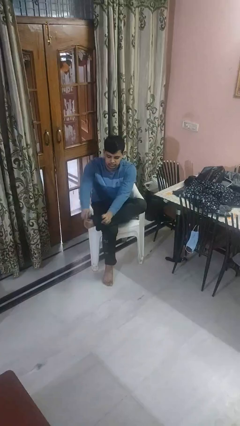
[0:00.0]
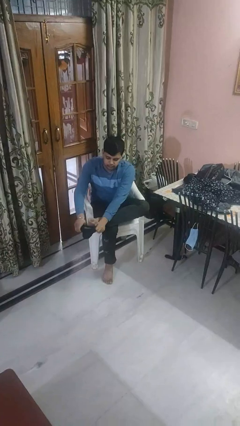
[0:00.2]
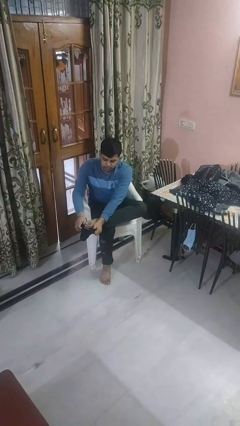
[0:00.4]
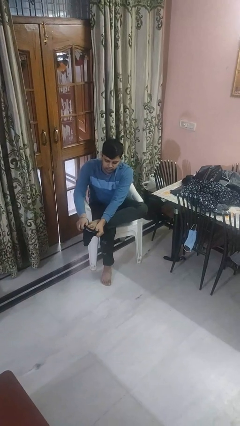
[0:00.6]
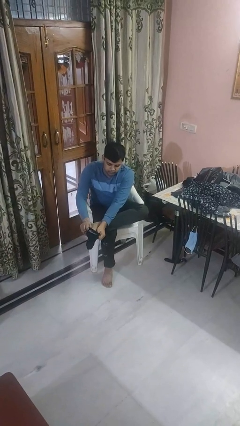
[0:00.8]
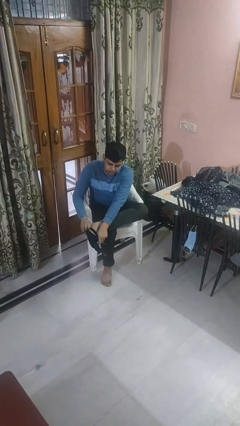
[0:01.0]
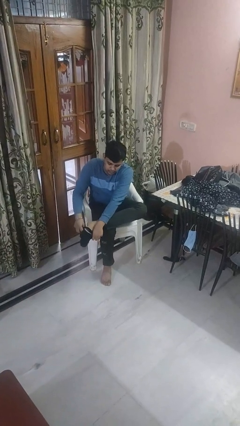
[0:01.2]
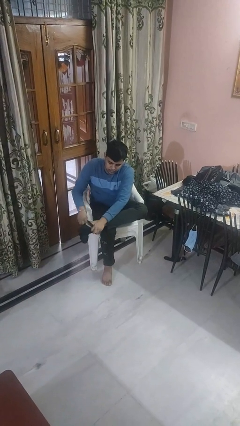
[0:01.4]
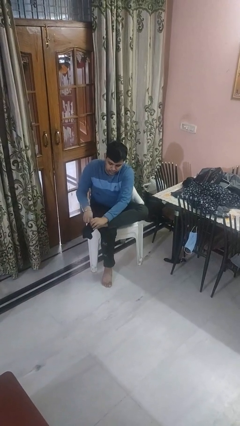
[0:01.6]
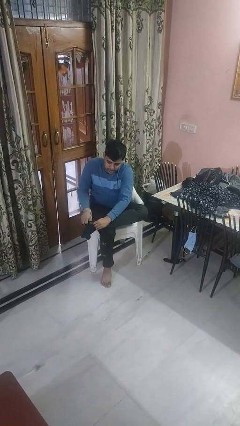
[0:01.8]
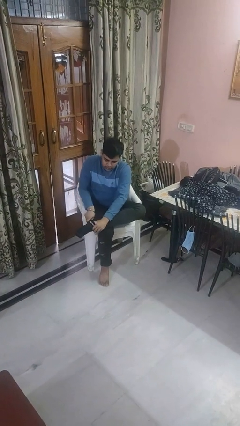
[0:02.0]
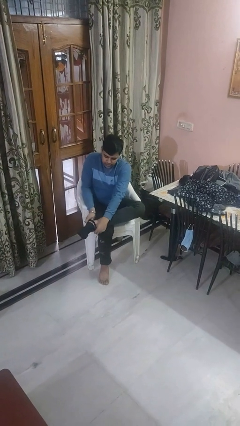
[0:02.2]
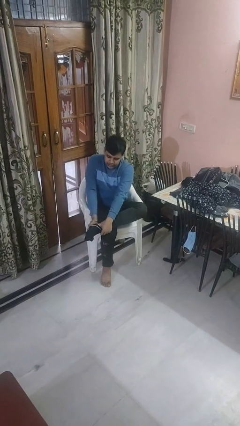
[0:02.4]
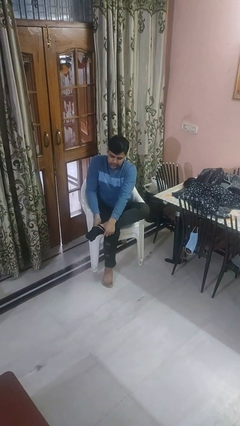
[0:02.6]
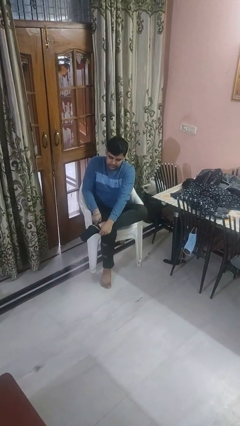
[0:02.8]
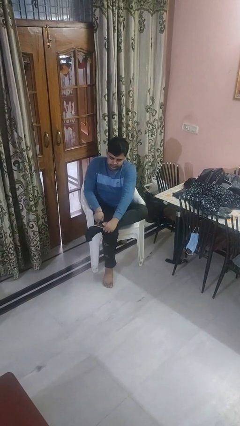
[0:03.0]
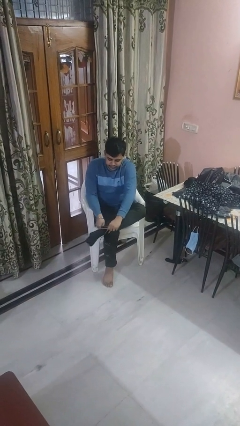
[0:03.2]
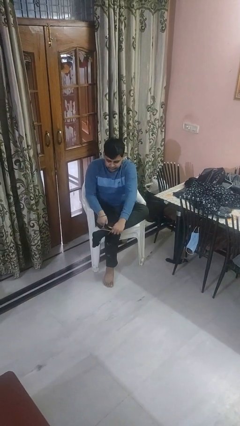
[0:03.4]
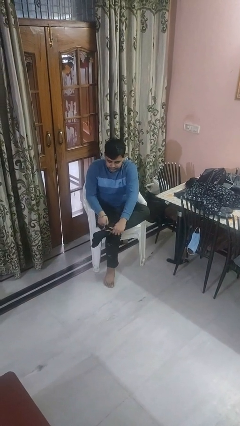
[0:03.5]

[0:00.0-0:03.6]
person puts on socks

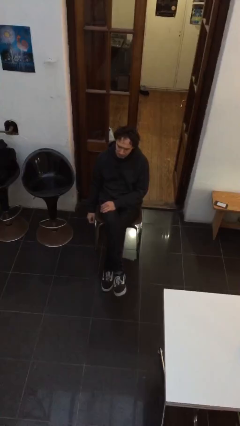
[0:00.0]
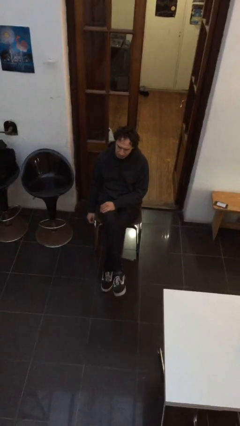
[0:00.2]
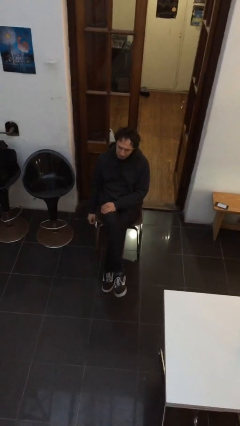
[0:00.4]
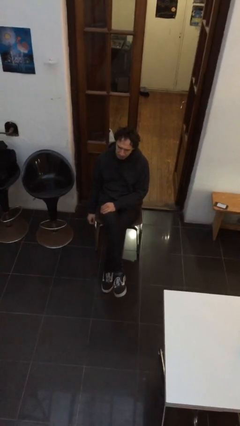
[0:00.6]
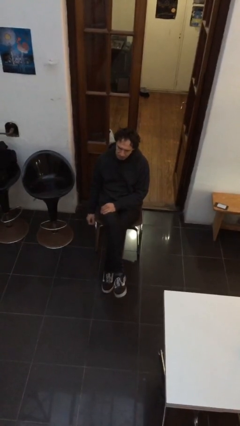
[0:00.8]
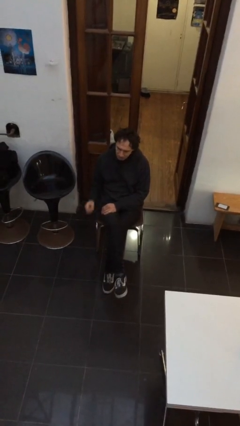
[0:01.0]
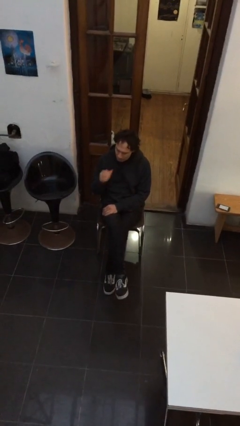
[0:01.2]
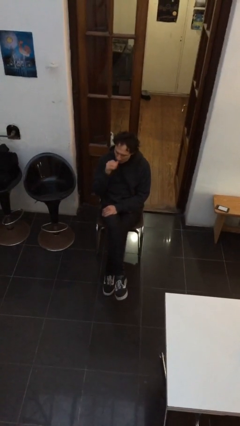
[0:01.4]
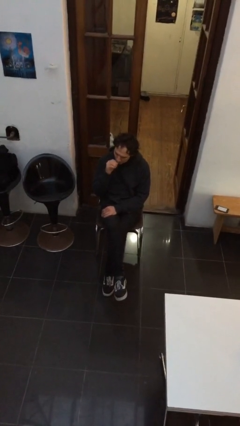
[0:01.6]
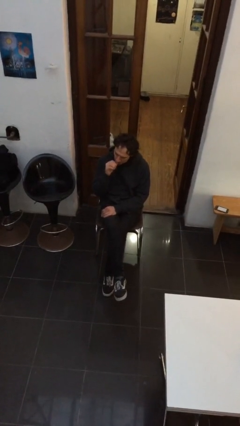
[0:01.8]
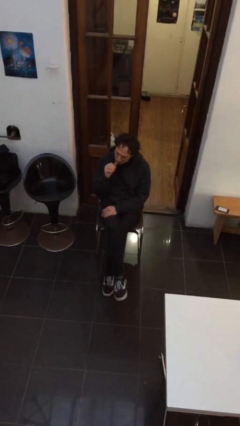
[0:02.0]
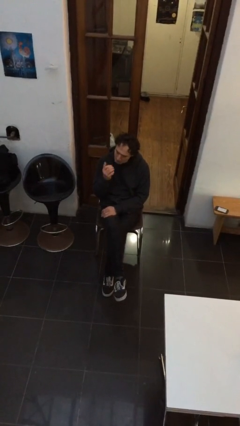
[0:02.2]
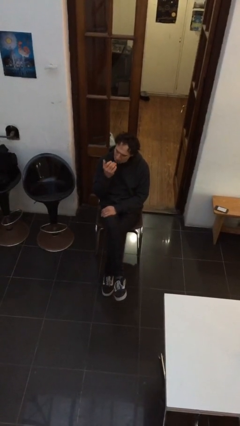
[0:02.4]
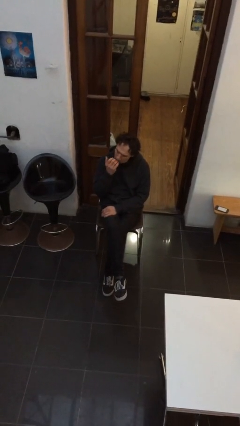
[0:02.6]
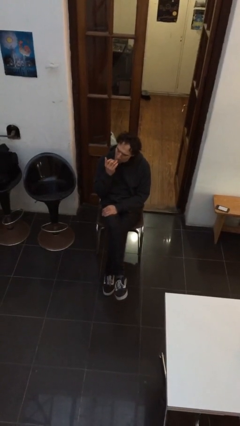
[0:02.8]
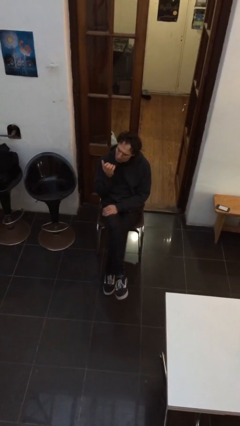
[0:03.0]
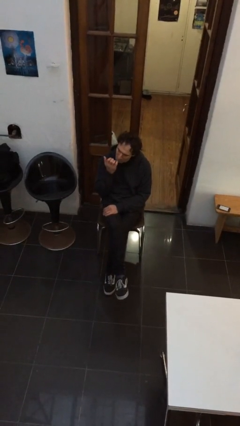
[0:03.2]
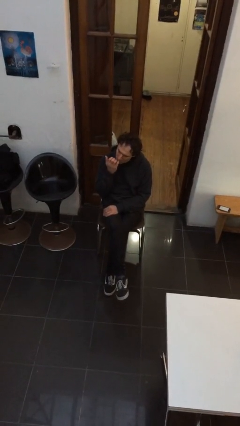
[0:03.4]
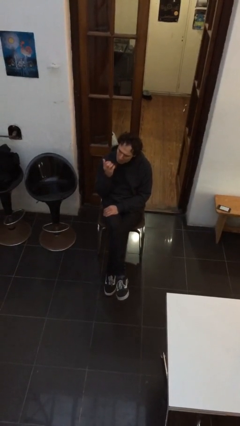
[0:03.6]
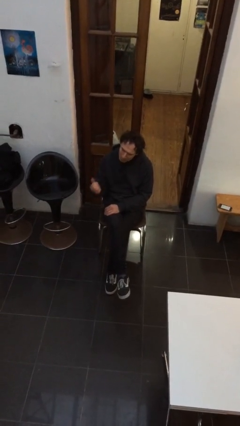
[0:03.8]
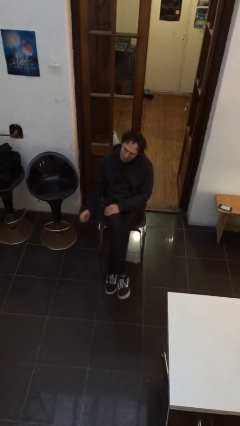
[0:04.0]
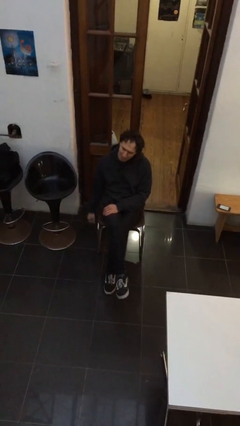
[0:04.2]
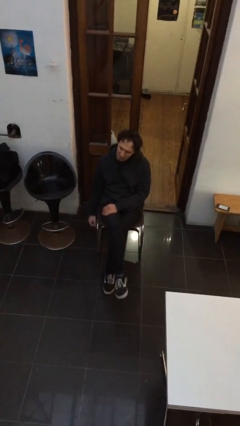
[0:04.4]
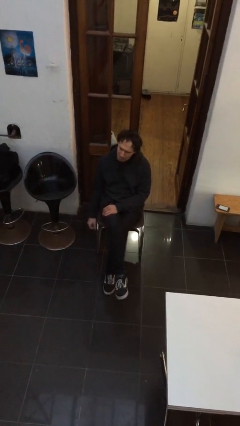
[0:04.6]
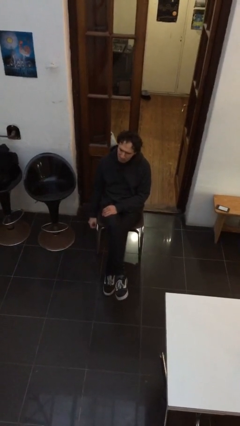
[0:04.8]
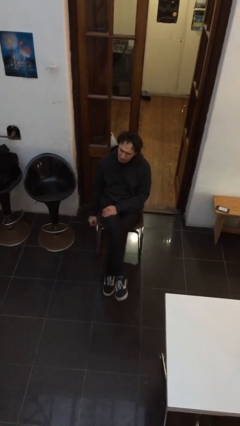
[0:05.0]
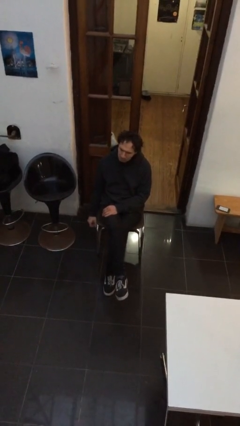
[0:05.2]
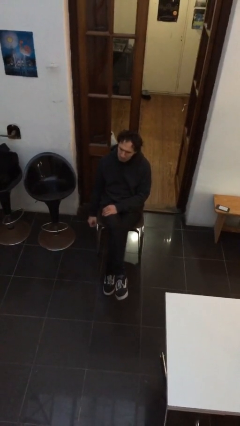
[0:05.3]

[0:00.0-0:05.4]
person licks fingers

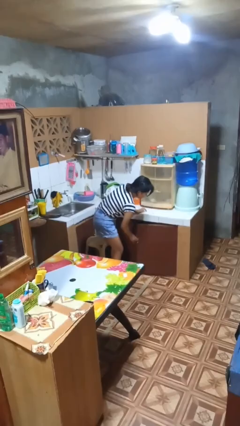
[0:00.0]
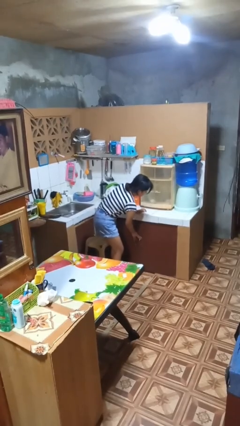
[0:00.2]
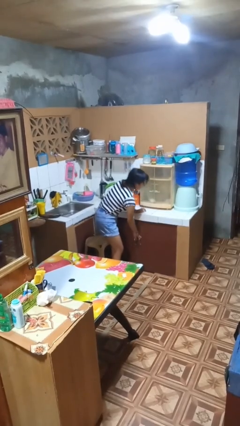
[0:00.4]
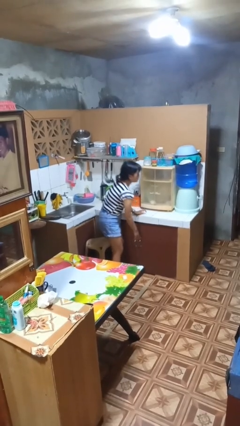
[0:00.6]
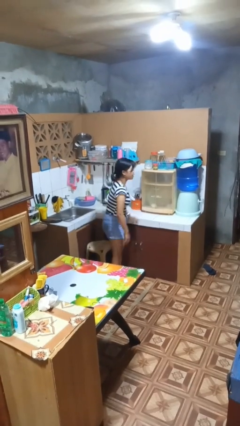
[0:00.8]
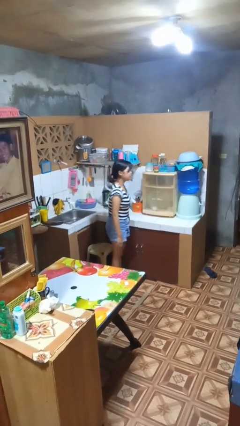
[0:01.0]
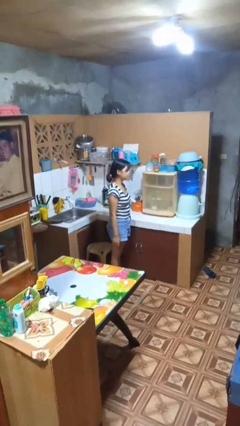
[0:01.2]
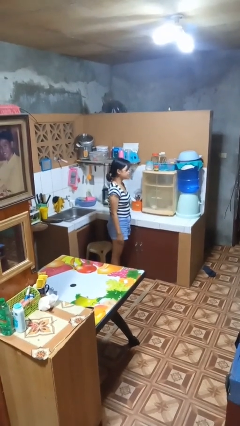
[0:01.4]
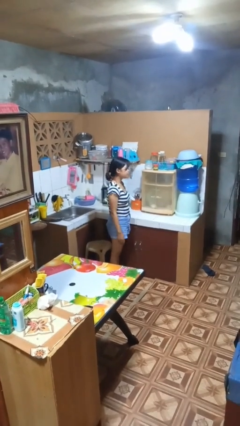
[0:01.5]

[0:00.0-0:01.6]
person closes cabinet

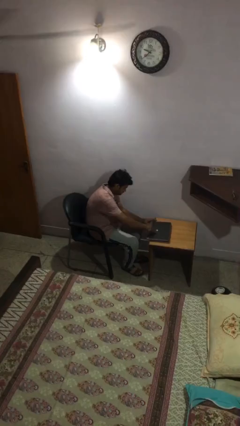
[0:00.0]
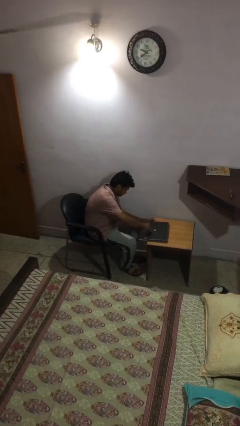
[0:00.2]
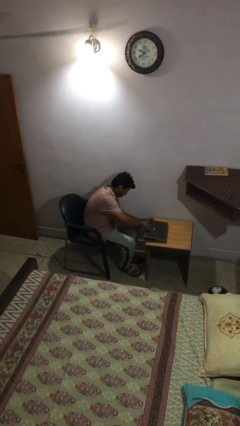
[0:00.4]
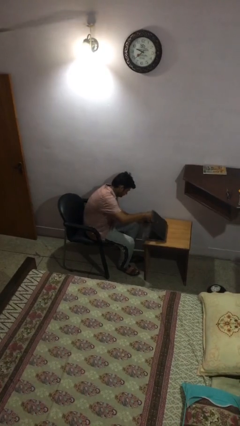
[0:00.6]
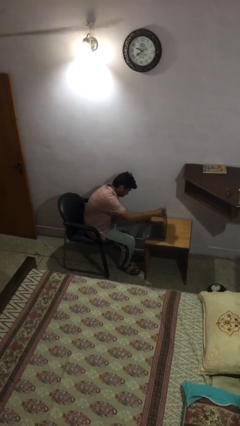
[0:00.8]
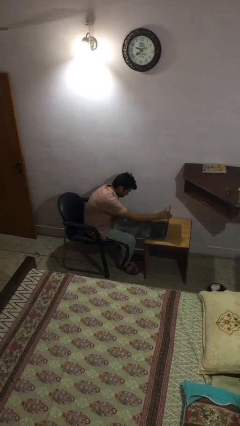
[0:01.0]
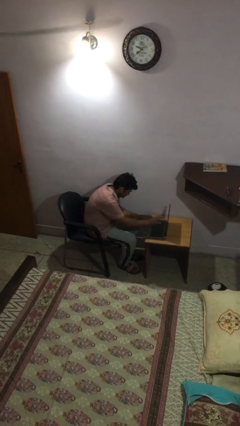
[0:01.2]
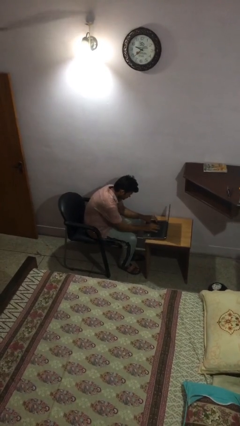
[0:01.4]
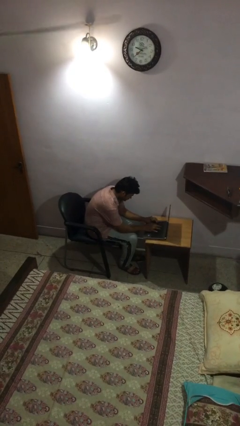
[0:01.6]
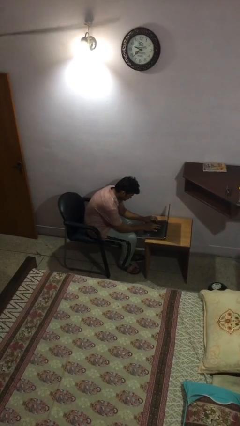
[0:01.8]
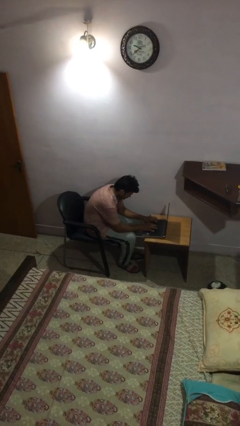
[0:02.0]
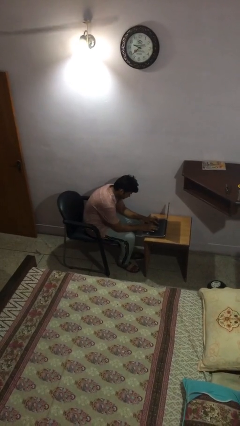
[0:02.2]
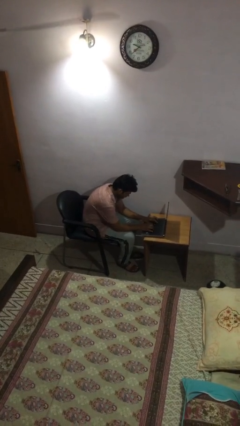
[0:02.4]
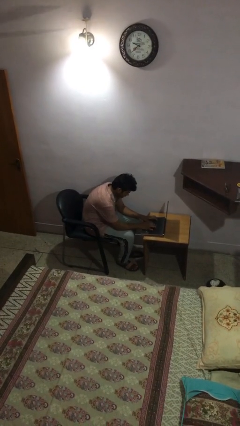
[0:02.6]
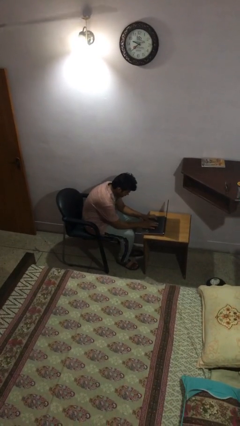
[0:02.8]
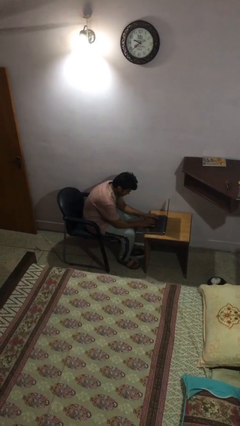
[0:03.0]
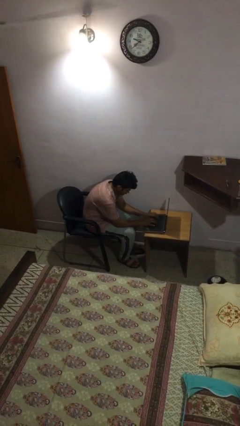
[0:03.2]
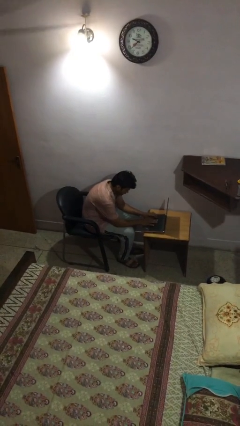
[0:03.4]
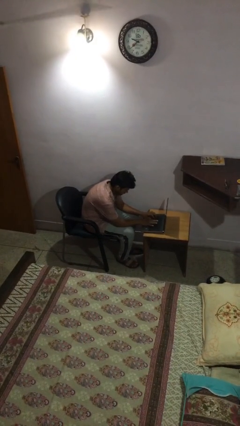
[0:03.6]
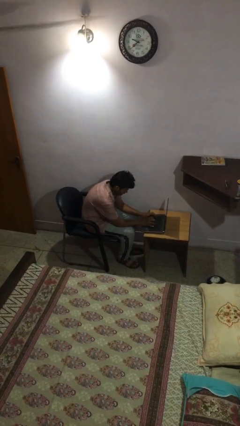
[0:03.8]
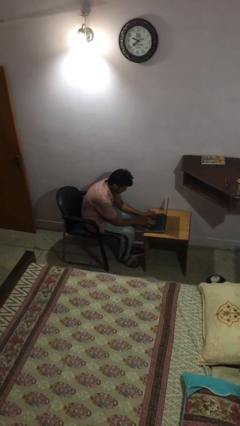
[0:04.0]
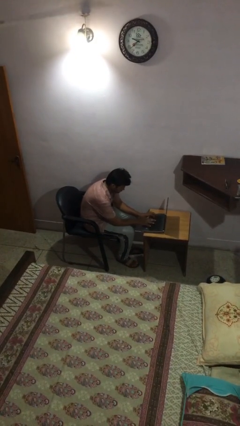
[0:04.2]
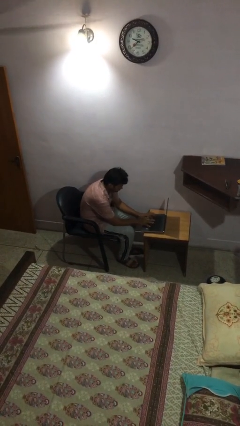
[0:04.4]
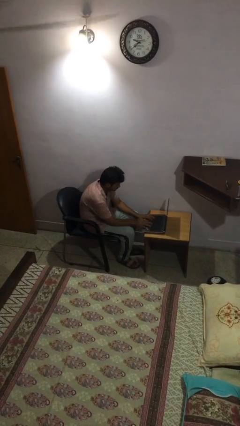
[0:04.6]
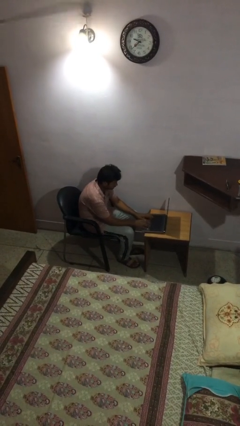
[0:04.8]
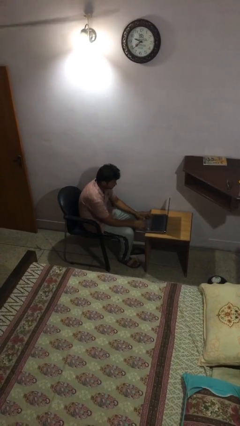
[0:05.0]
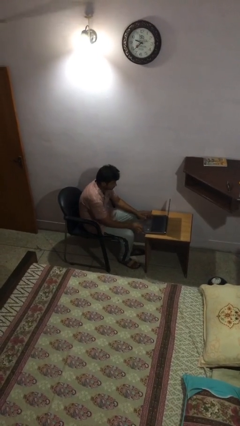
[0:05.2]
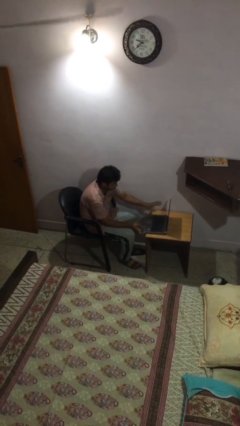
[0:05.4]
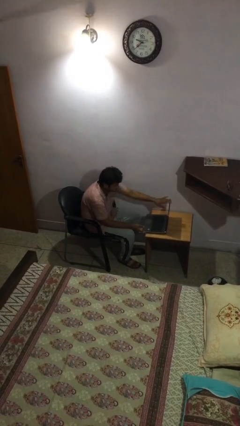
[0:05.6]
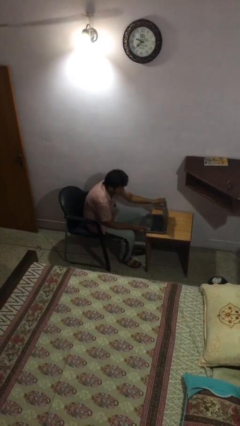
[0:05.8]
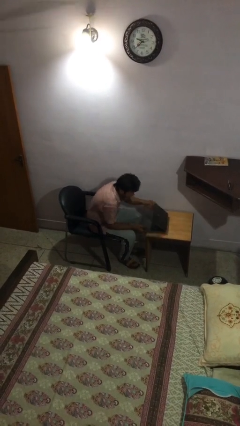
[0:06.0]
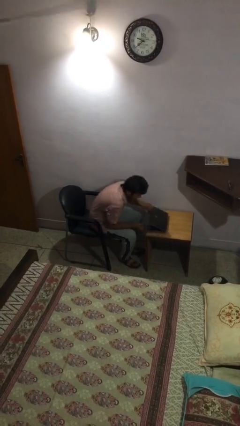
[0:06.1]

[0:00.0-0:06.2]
person interacts with laptop

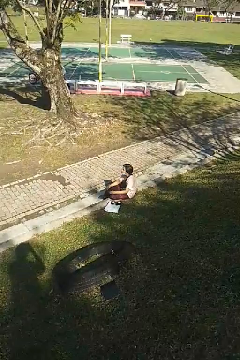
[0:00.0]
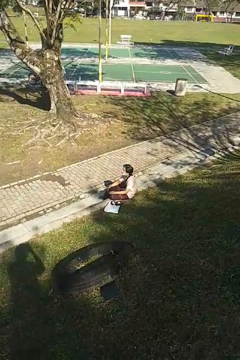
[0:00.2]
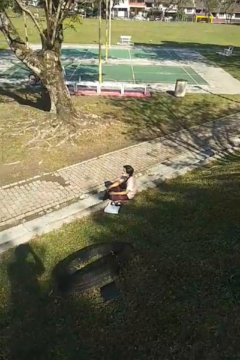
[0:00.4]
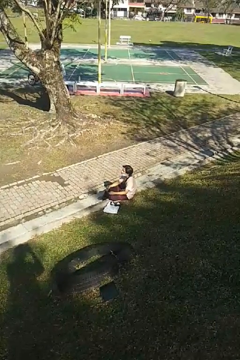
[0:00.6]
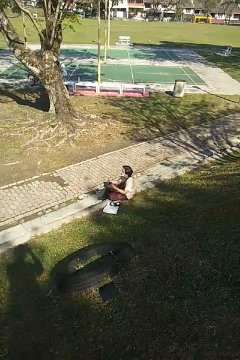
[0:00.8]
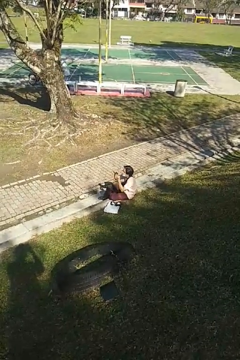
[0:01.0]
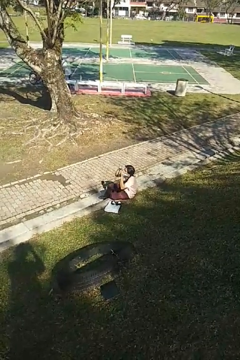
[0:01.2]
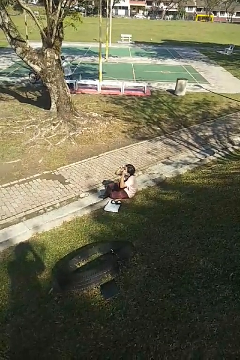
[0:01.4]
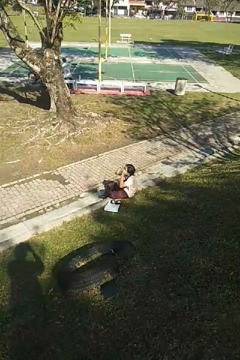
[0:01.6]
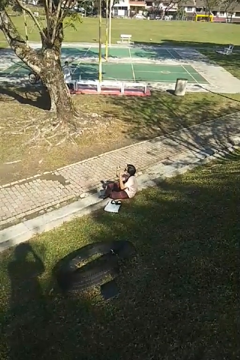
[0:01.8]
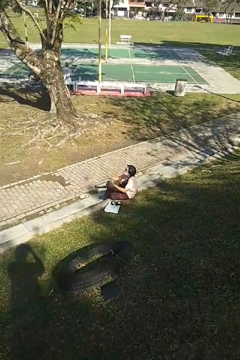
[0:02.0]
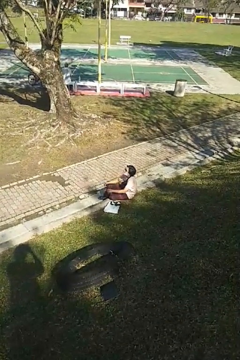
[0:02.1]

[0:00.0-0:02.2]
person puts on sunglasses
